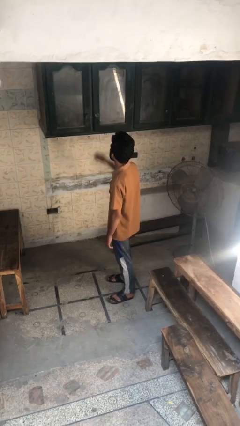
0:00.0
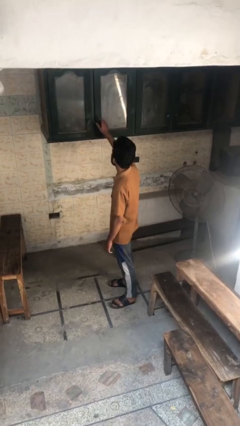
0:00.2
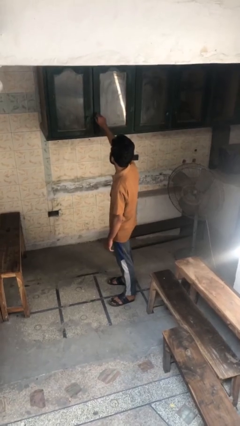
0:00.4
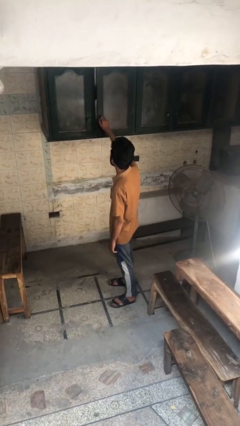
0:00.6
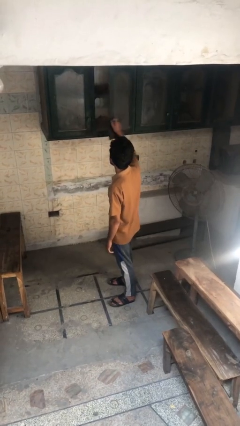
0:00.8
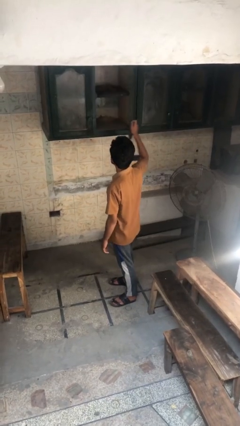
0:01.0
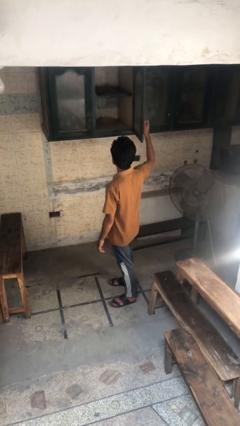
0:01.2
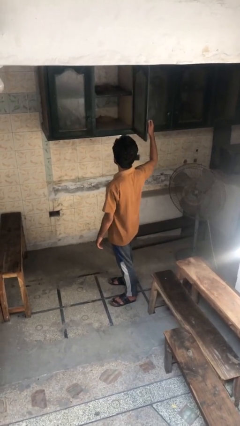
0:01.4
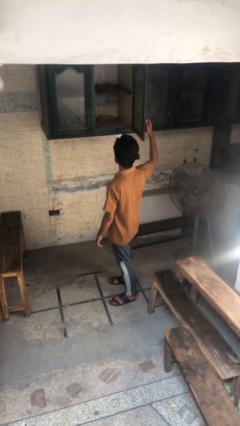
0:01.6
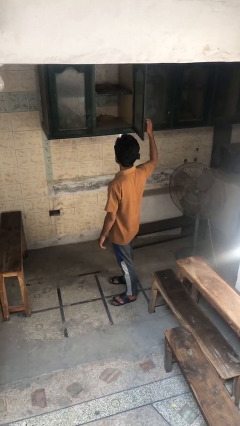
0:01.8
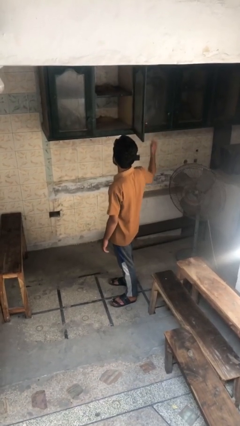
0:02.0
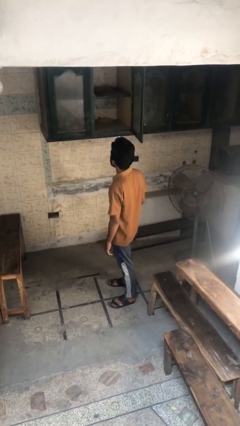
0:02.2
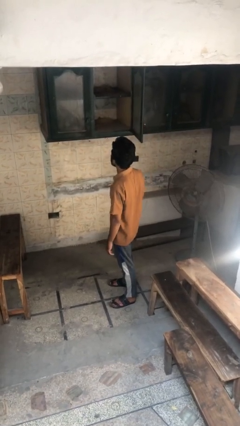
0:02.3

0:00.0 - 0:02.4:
person opens cabinet

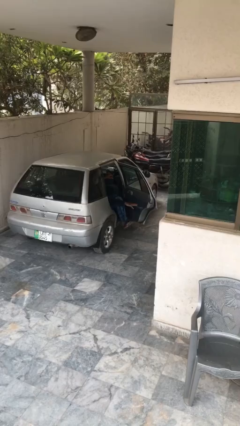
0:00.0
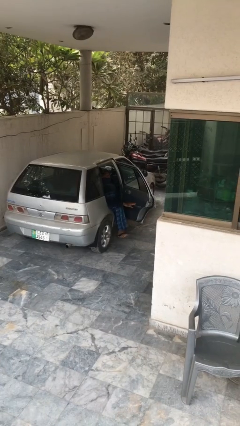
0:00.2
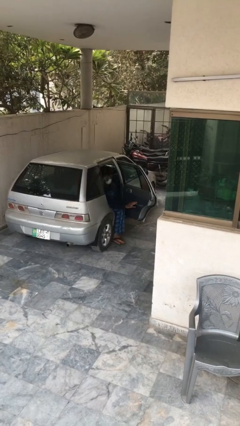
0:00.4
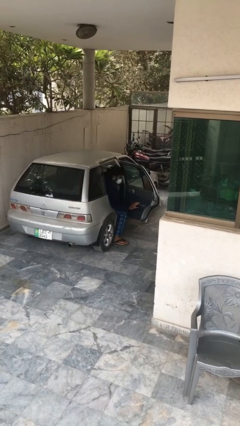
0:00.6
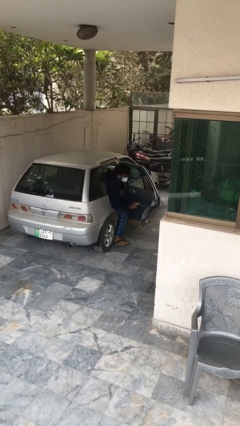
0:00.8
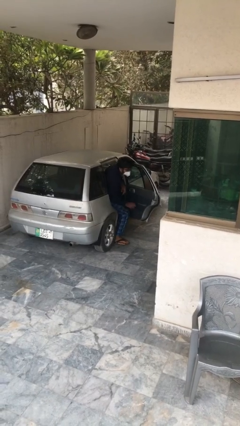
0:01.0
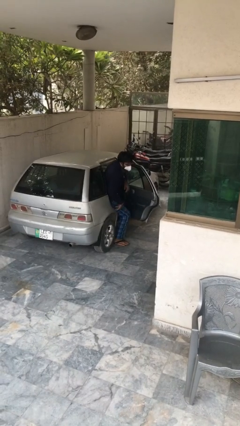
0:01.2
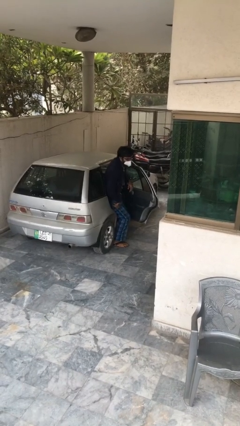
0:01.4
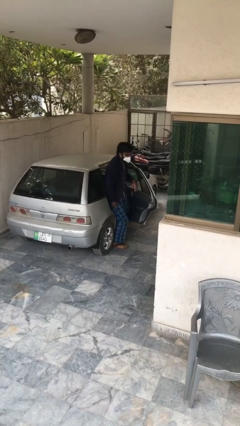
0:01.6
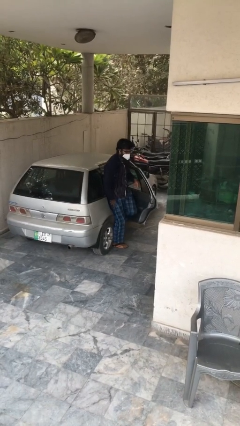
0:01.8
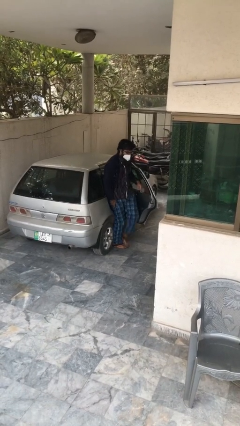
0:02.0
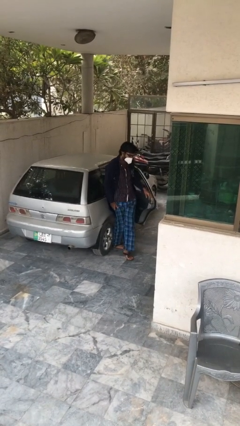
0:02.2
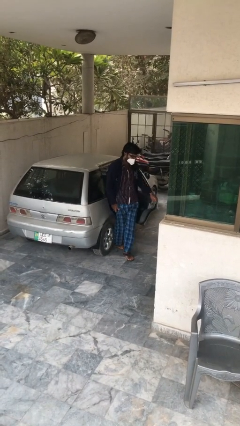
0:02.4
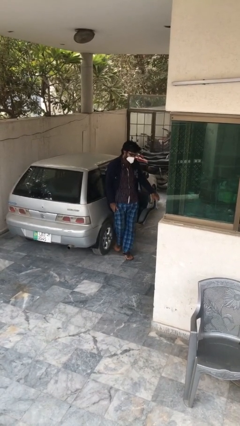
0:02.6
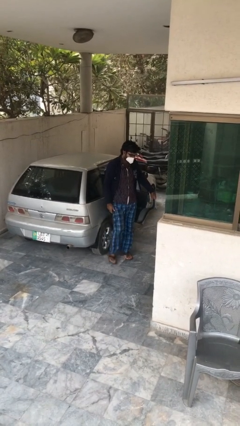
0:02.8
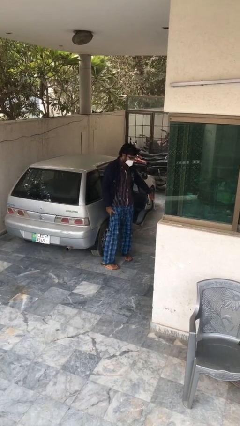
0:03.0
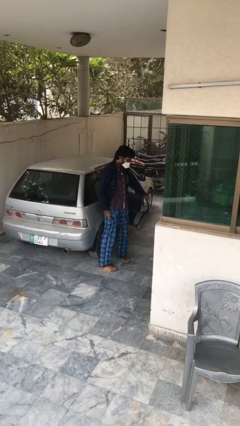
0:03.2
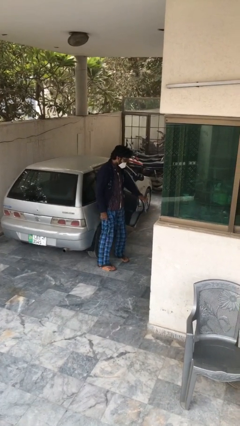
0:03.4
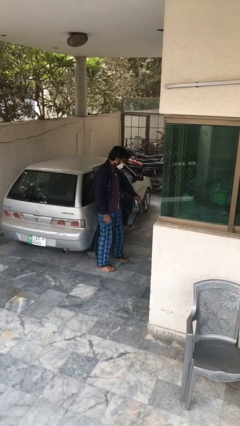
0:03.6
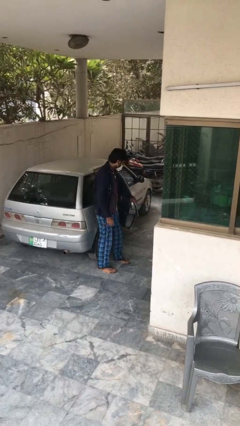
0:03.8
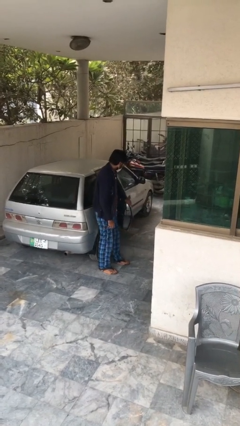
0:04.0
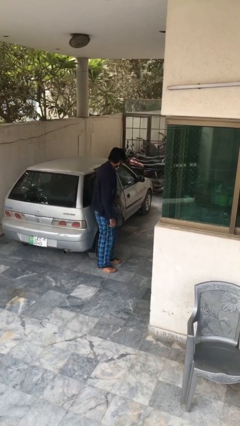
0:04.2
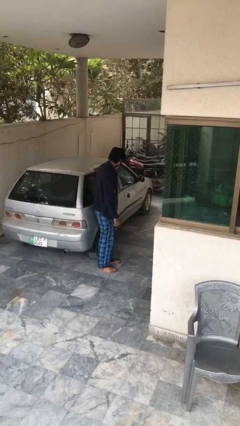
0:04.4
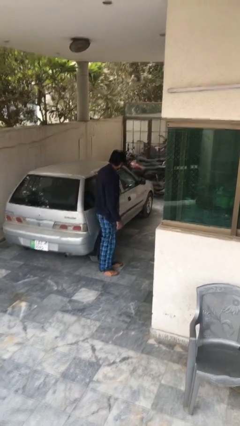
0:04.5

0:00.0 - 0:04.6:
person exits car

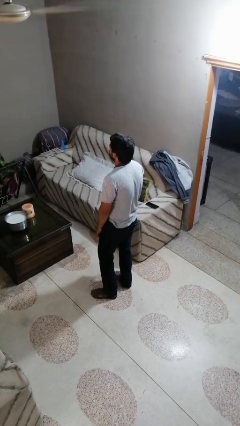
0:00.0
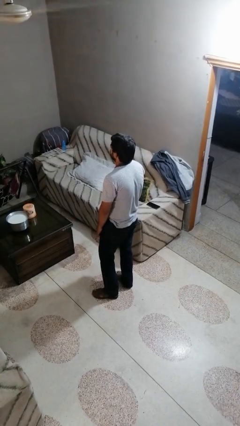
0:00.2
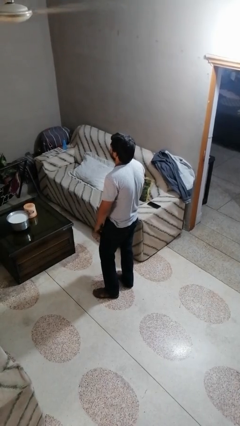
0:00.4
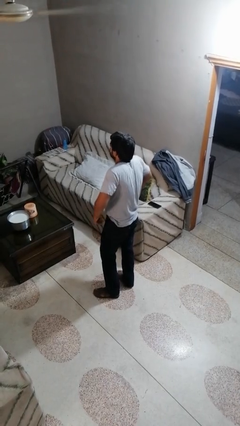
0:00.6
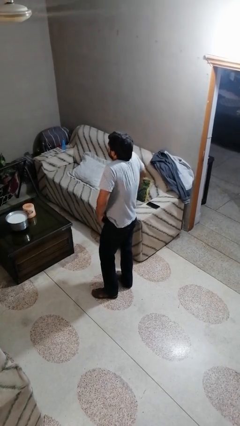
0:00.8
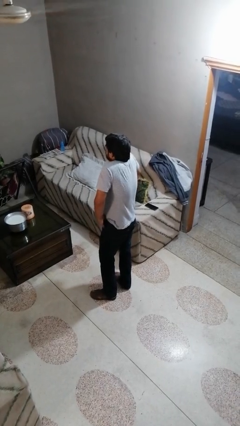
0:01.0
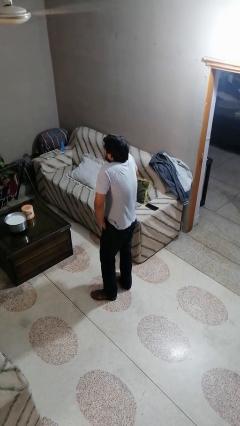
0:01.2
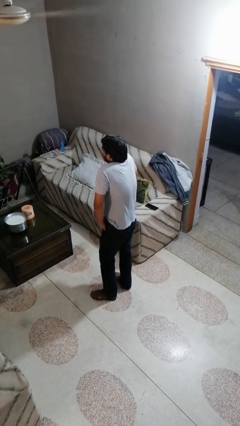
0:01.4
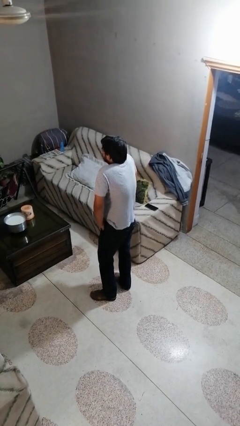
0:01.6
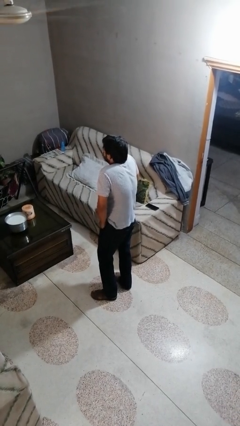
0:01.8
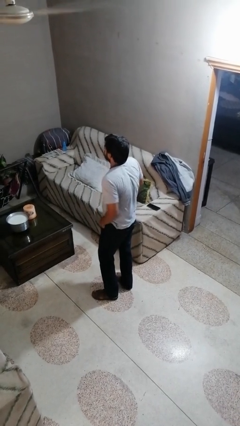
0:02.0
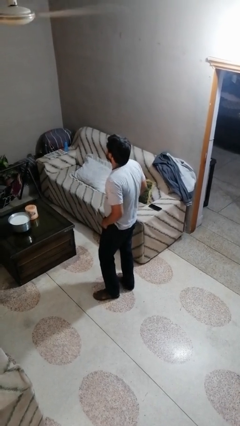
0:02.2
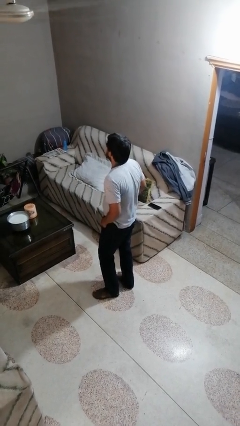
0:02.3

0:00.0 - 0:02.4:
person puts hands in back pockets

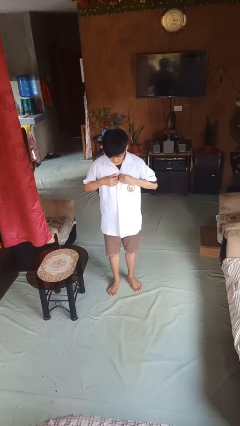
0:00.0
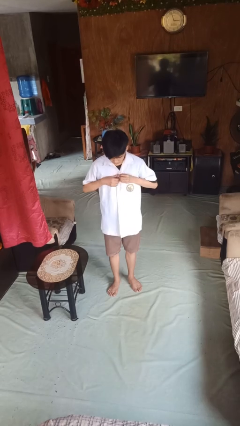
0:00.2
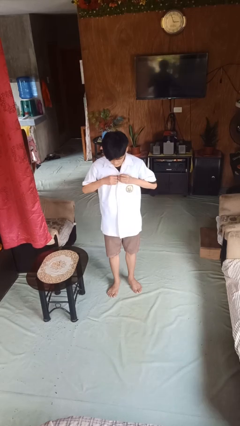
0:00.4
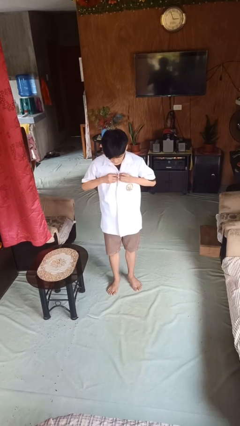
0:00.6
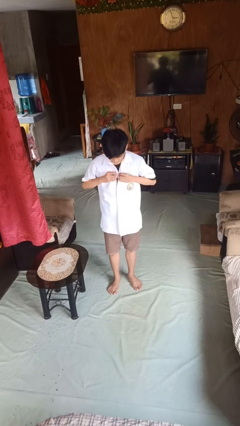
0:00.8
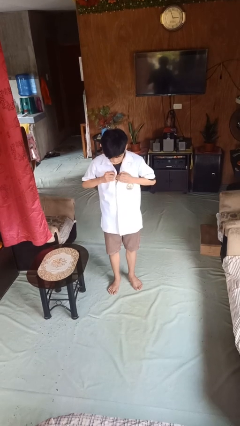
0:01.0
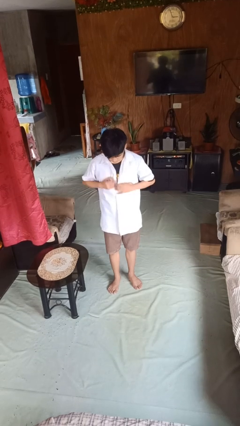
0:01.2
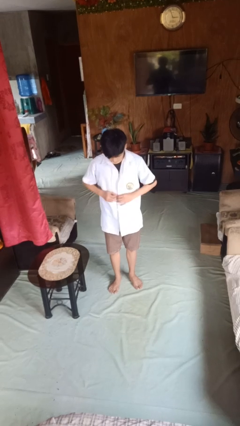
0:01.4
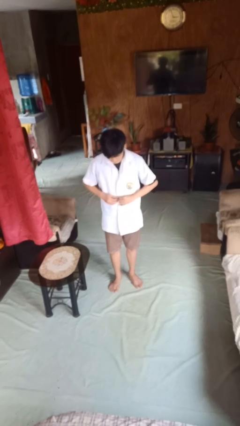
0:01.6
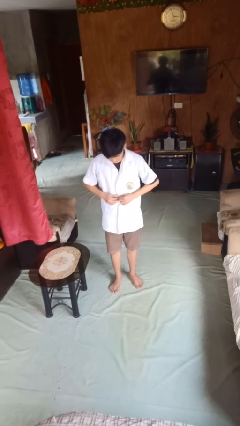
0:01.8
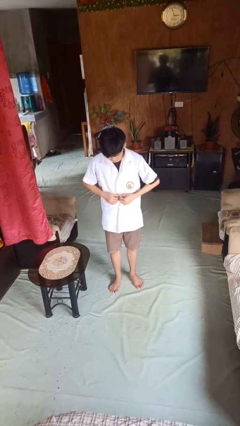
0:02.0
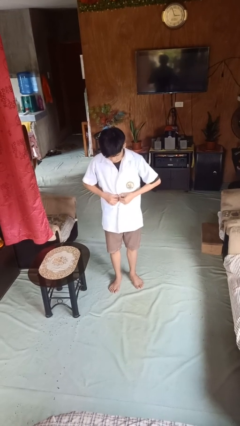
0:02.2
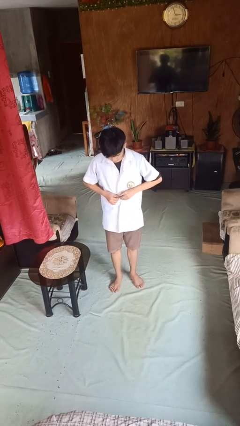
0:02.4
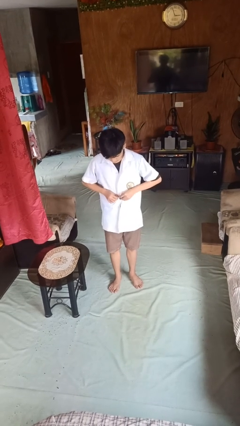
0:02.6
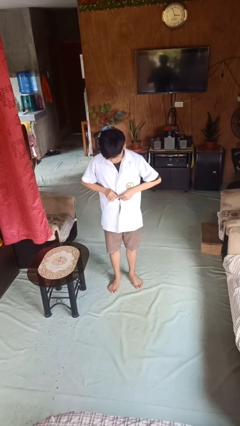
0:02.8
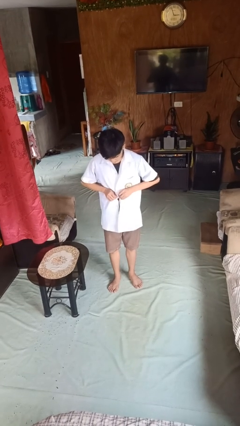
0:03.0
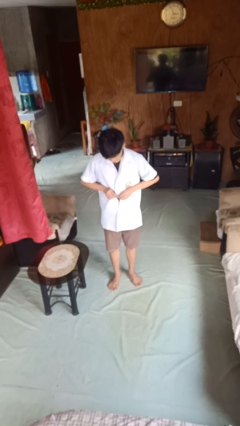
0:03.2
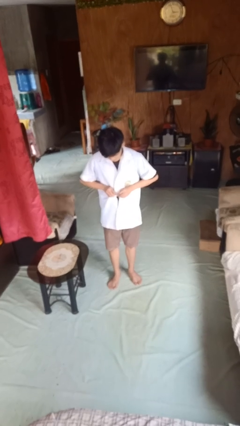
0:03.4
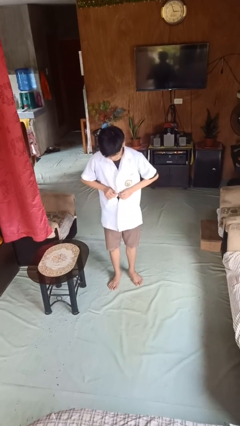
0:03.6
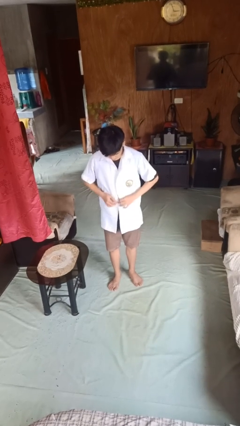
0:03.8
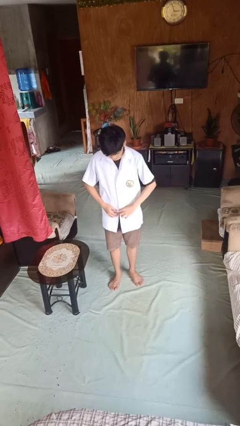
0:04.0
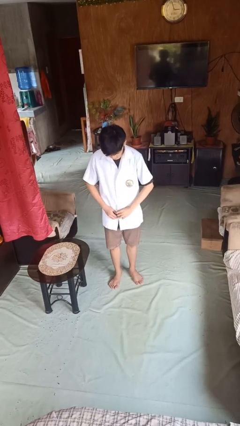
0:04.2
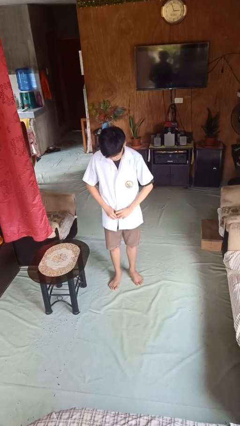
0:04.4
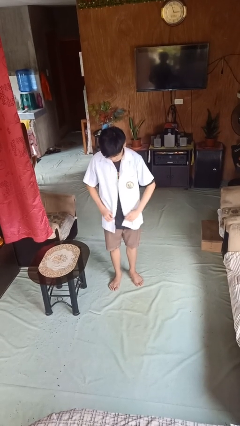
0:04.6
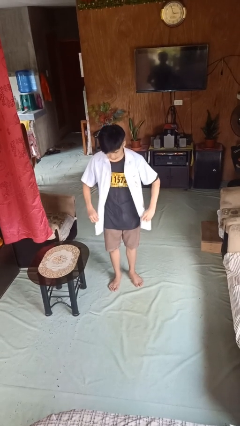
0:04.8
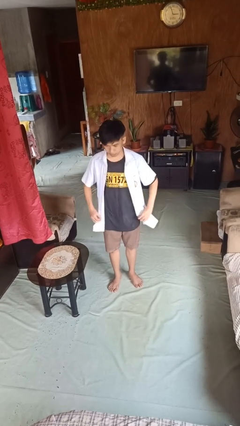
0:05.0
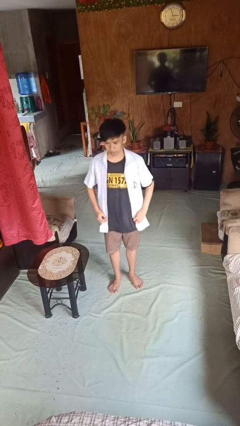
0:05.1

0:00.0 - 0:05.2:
person unbuttons shirt

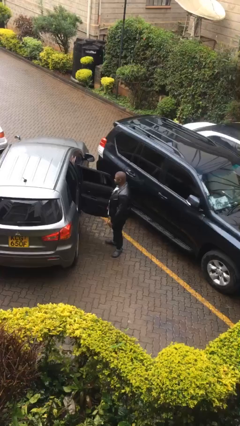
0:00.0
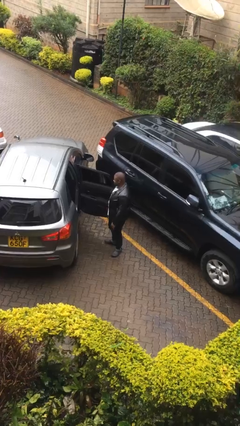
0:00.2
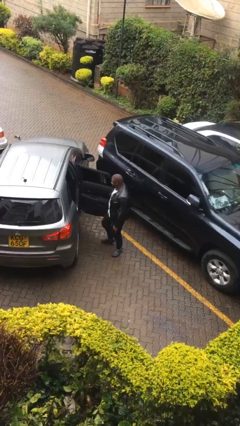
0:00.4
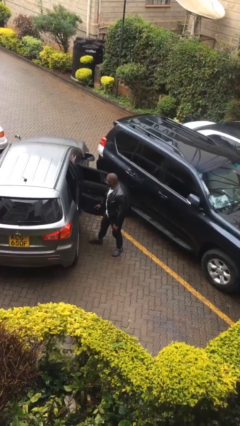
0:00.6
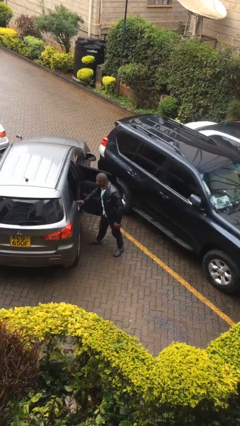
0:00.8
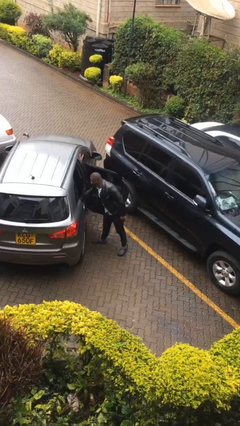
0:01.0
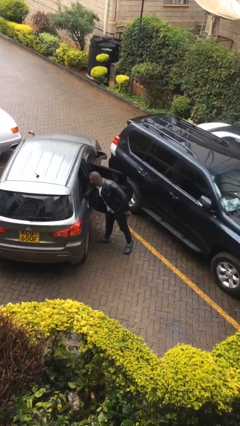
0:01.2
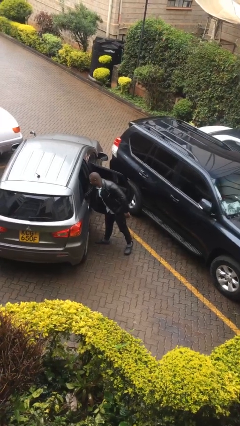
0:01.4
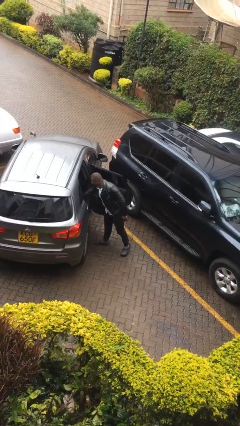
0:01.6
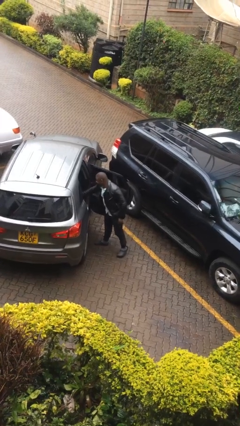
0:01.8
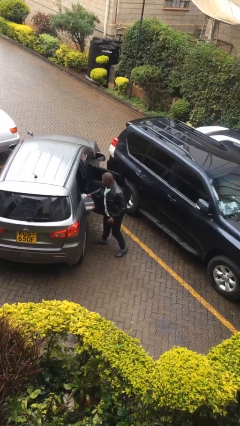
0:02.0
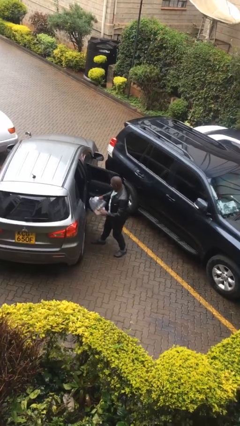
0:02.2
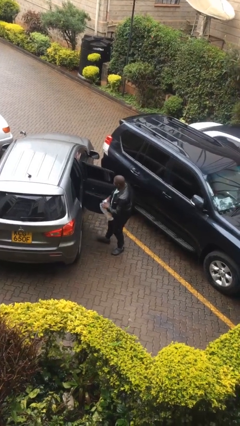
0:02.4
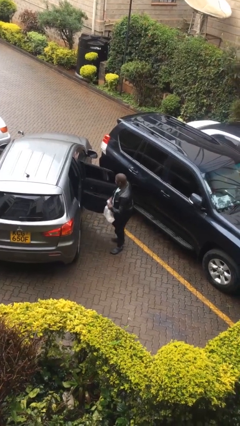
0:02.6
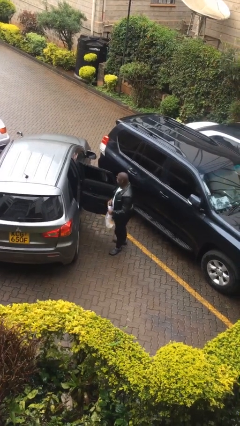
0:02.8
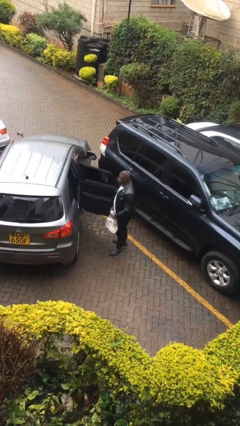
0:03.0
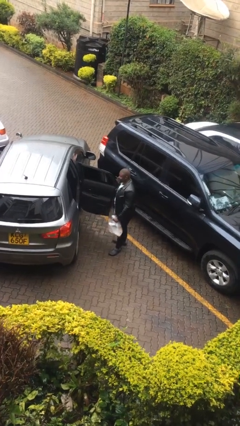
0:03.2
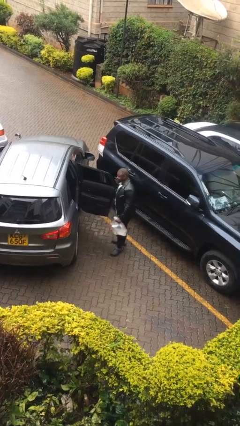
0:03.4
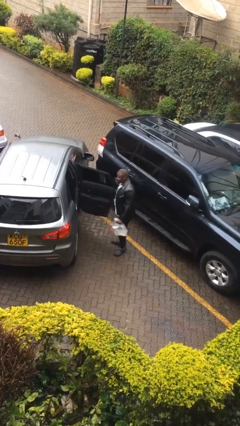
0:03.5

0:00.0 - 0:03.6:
person unloads car
